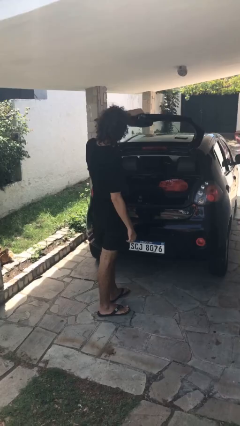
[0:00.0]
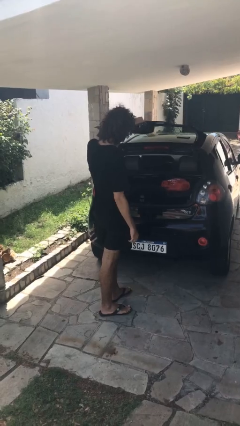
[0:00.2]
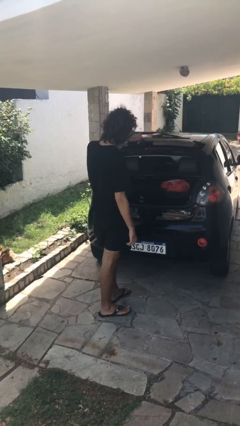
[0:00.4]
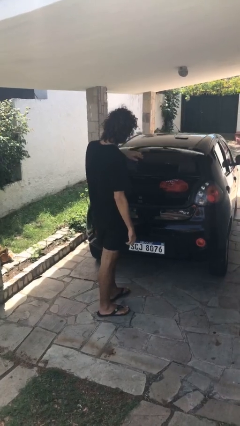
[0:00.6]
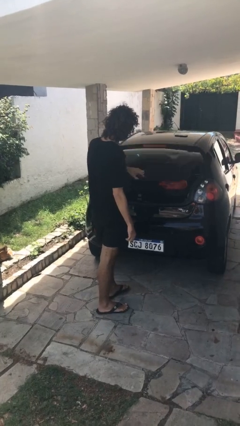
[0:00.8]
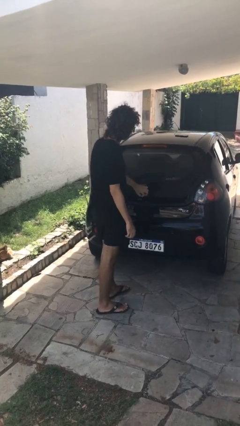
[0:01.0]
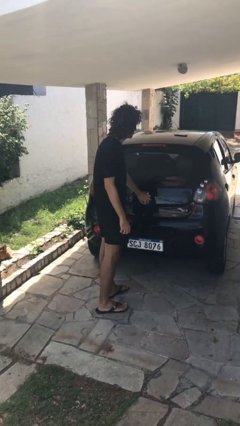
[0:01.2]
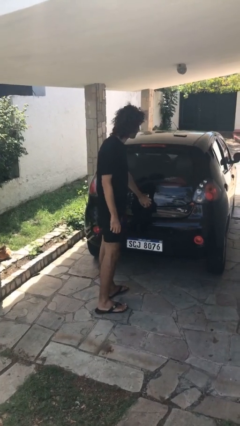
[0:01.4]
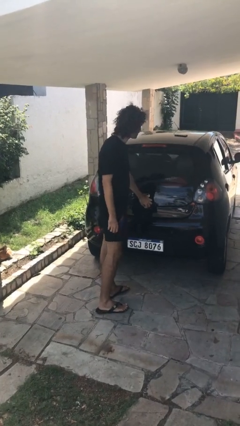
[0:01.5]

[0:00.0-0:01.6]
person closes car trunk

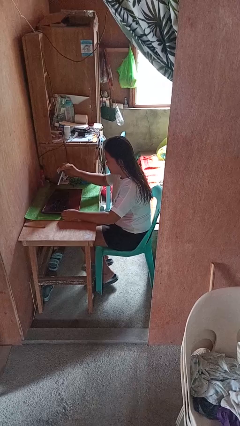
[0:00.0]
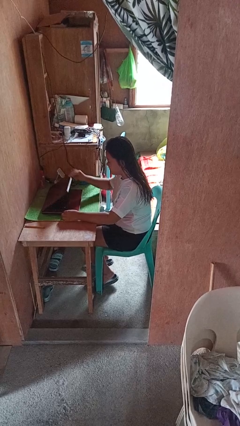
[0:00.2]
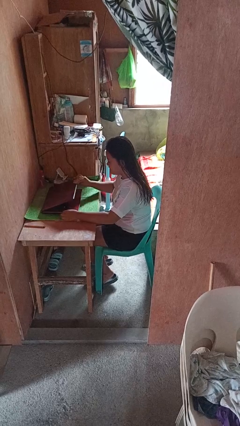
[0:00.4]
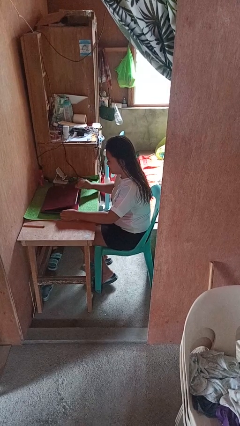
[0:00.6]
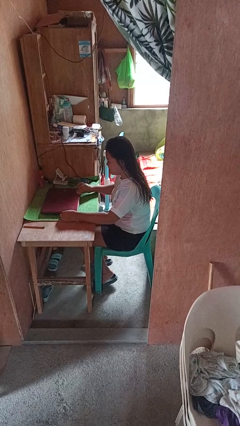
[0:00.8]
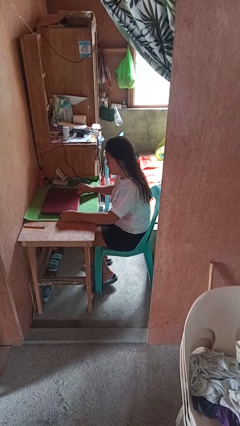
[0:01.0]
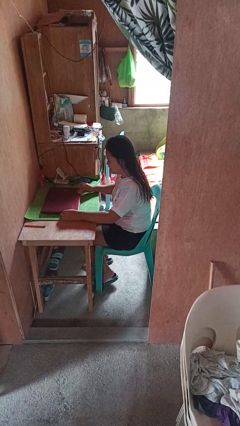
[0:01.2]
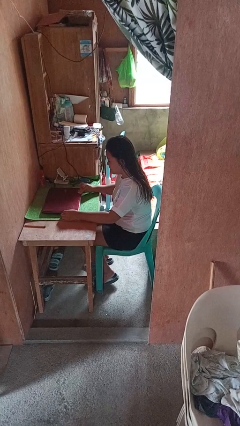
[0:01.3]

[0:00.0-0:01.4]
person closes laptop

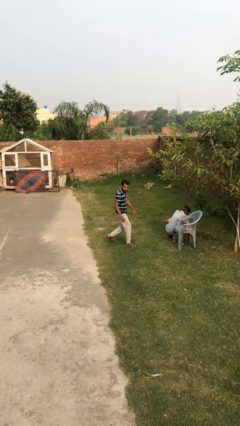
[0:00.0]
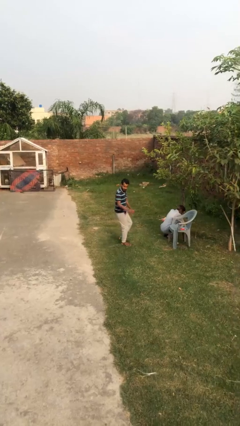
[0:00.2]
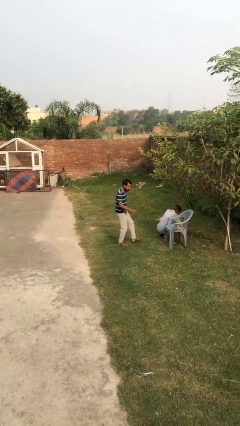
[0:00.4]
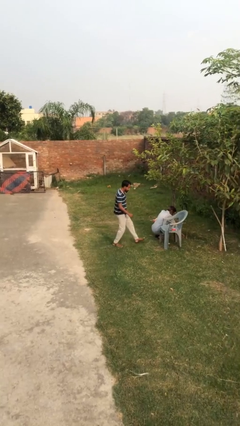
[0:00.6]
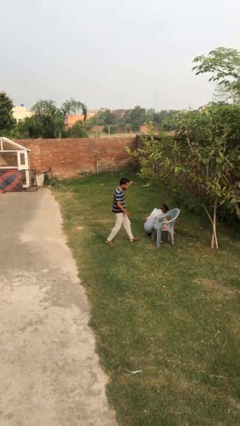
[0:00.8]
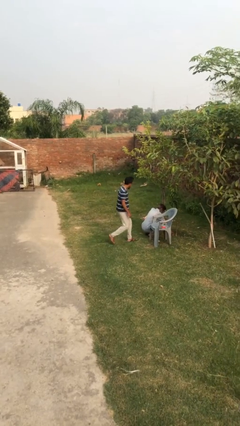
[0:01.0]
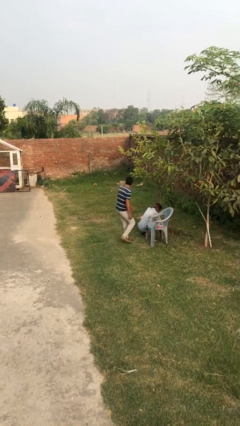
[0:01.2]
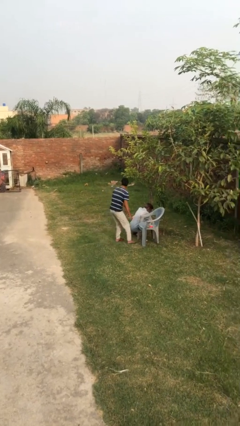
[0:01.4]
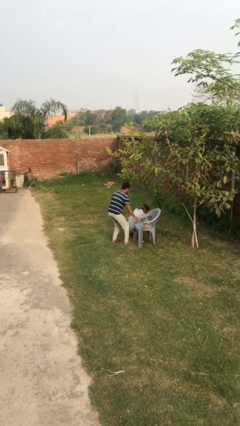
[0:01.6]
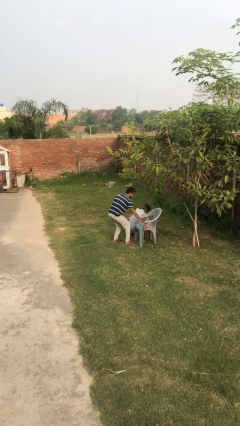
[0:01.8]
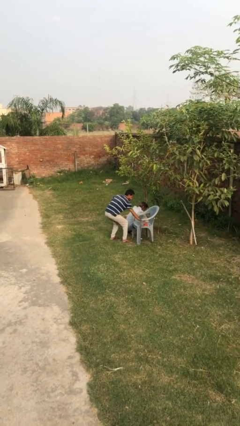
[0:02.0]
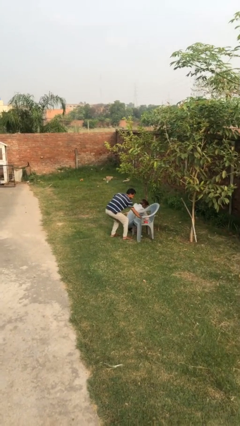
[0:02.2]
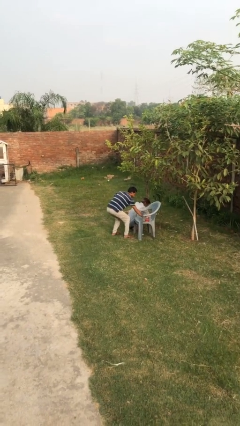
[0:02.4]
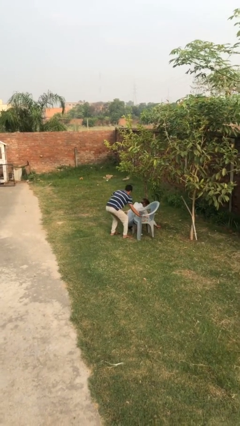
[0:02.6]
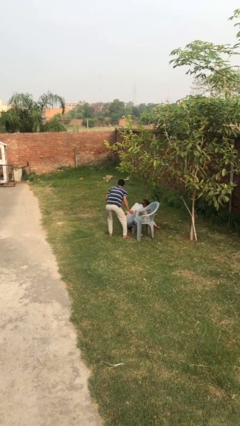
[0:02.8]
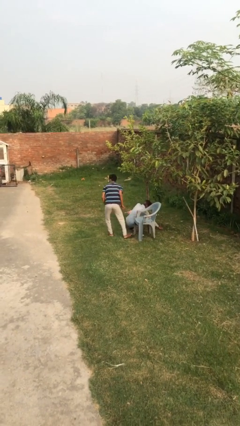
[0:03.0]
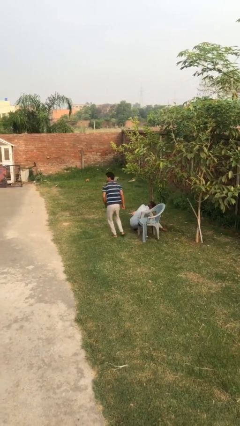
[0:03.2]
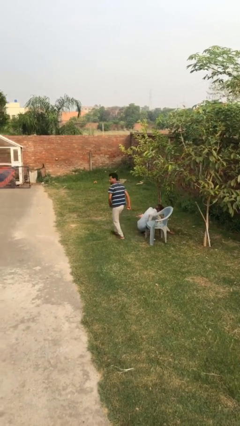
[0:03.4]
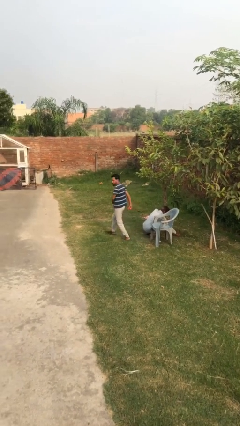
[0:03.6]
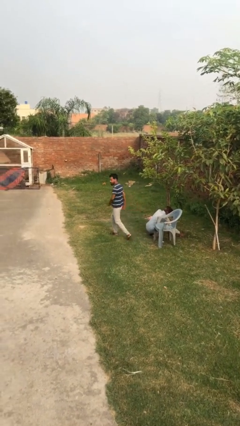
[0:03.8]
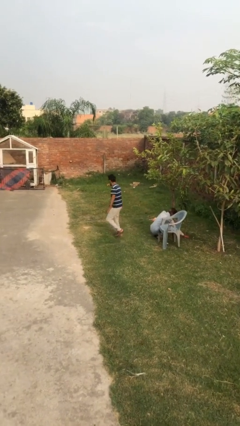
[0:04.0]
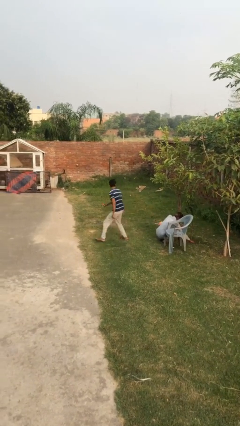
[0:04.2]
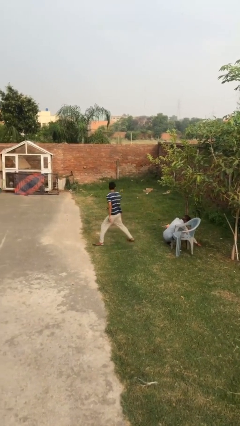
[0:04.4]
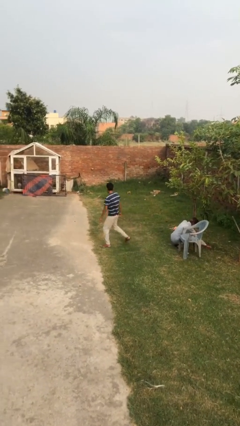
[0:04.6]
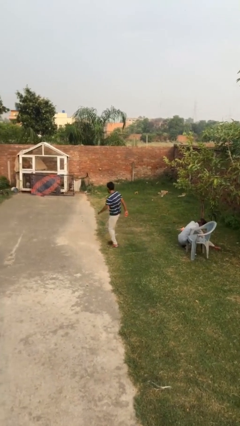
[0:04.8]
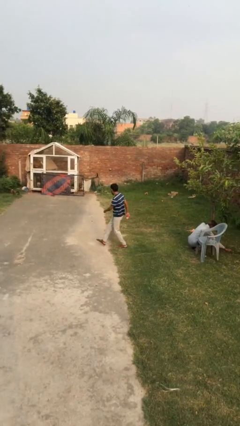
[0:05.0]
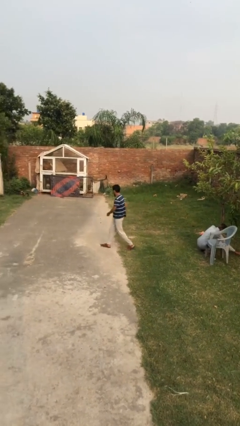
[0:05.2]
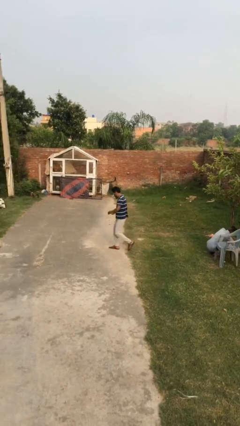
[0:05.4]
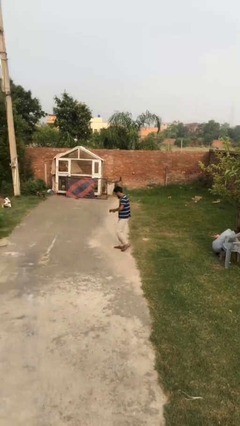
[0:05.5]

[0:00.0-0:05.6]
person steals object from person

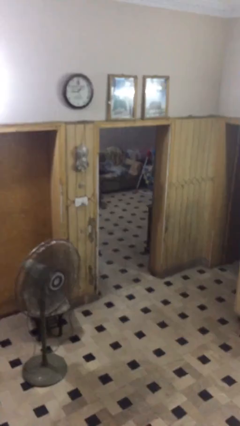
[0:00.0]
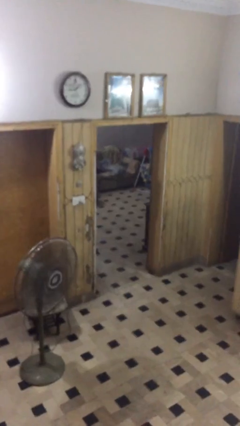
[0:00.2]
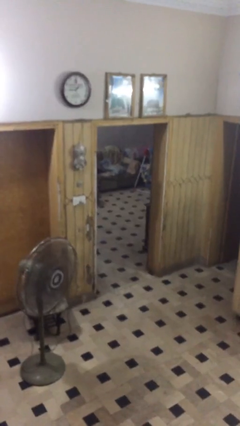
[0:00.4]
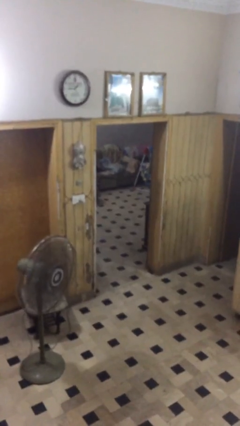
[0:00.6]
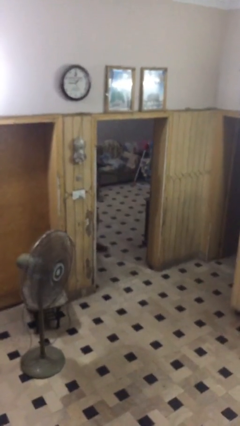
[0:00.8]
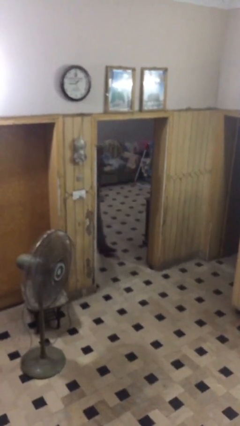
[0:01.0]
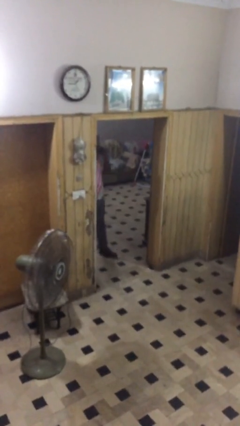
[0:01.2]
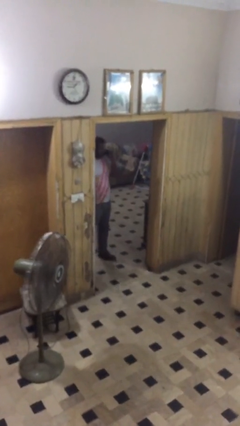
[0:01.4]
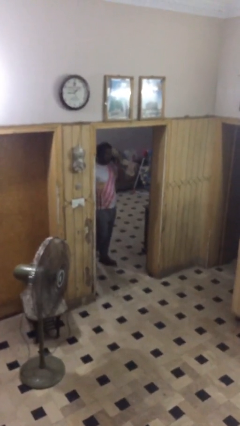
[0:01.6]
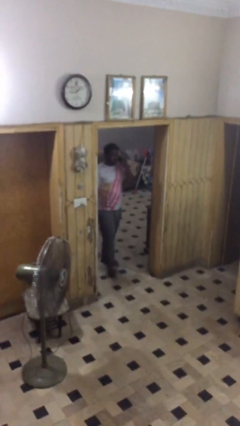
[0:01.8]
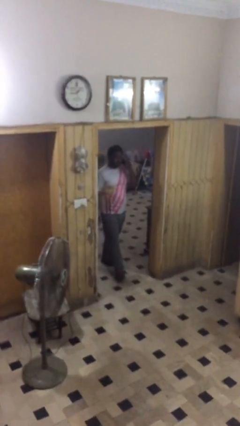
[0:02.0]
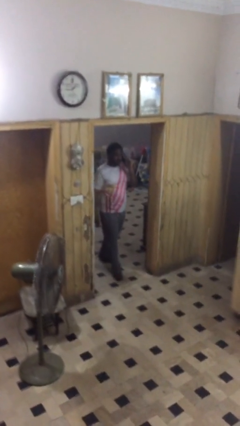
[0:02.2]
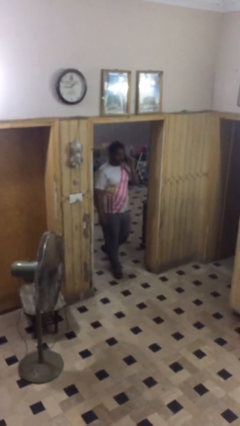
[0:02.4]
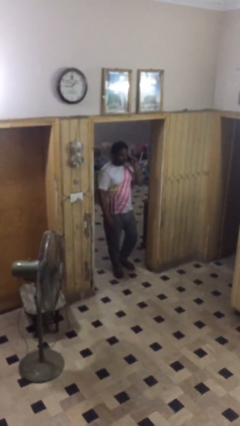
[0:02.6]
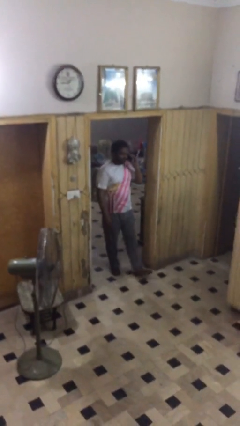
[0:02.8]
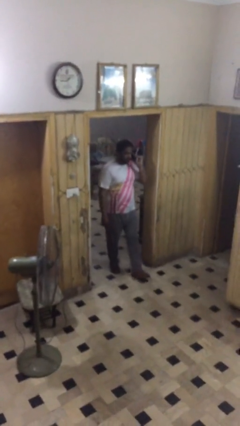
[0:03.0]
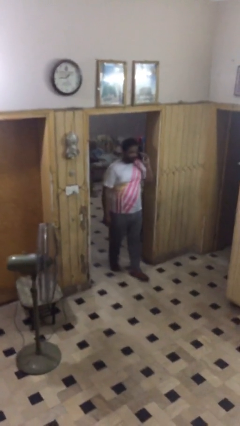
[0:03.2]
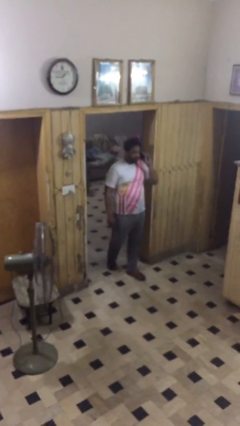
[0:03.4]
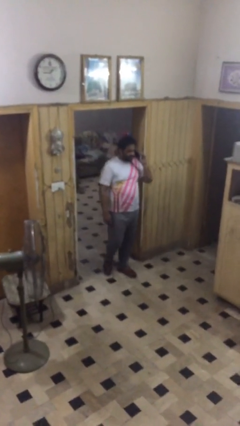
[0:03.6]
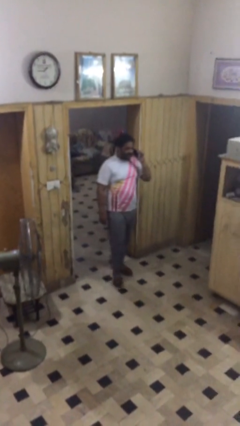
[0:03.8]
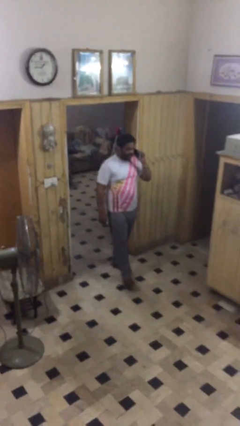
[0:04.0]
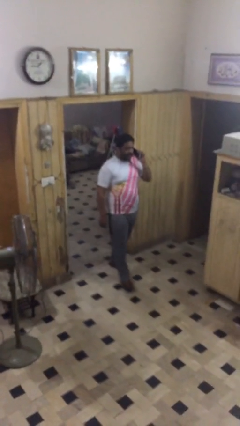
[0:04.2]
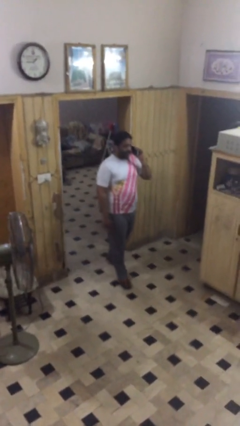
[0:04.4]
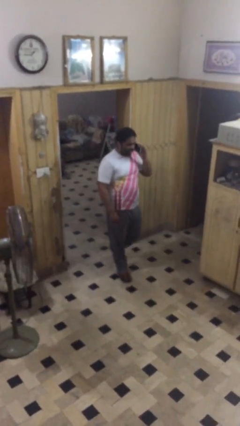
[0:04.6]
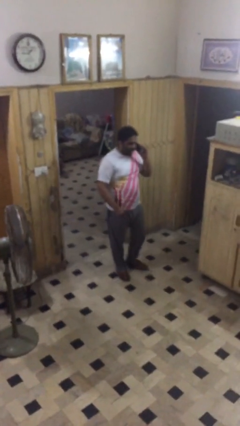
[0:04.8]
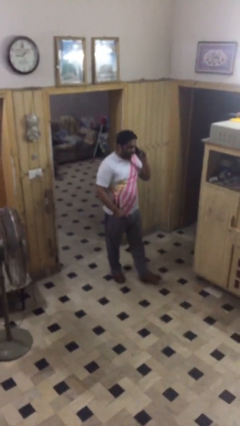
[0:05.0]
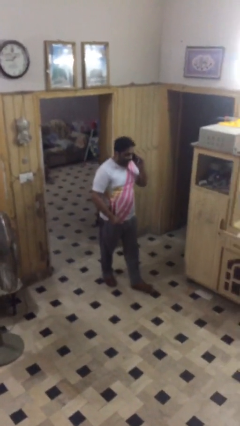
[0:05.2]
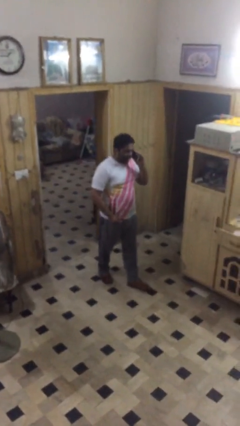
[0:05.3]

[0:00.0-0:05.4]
person enters scene through structure

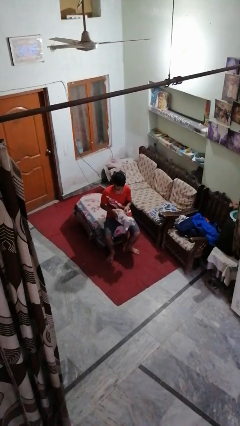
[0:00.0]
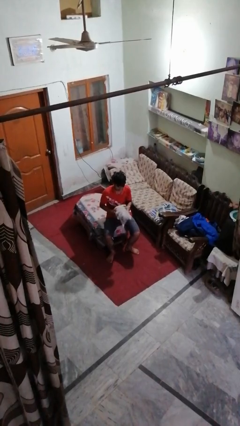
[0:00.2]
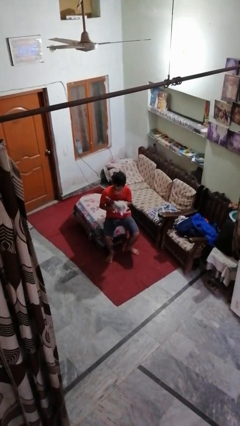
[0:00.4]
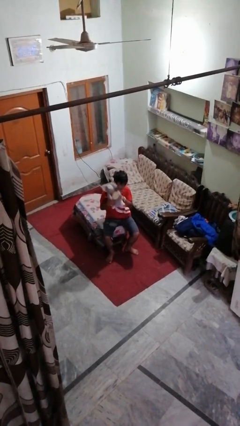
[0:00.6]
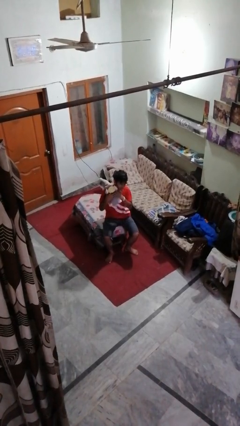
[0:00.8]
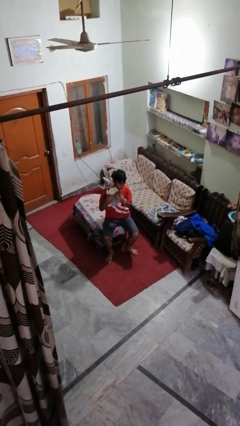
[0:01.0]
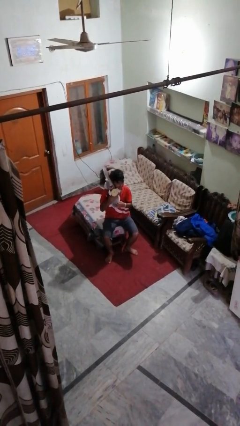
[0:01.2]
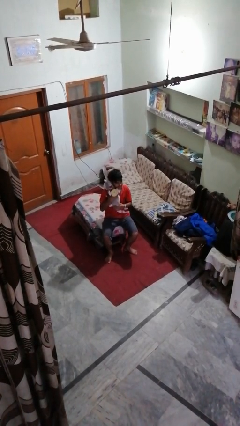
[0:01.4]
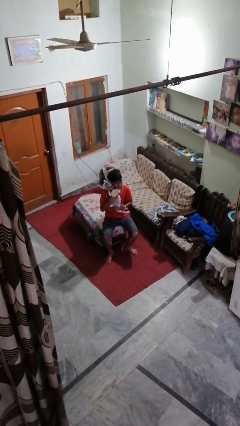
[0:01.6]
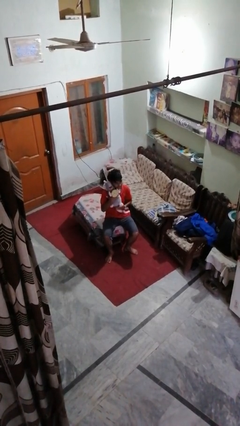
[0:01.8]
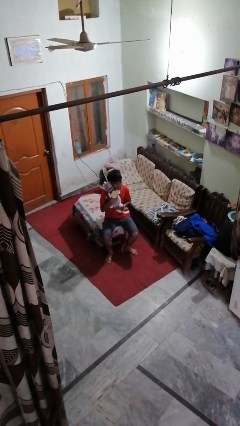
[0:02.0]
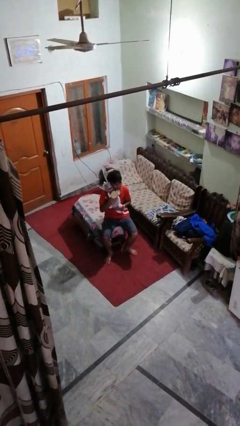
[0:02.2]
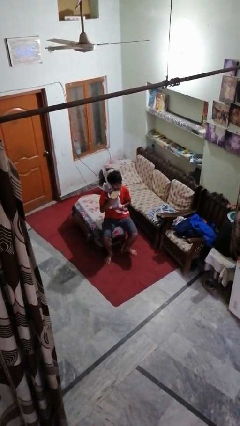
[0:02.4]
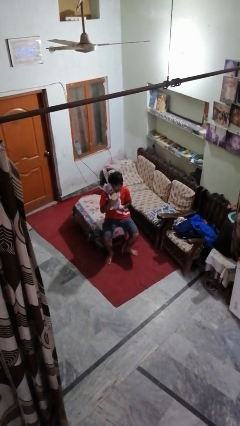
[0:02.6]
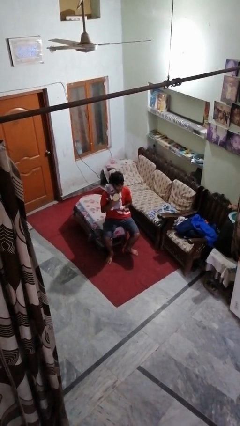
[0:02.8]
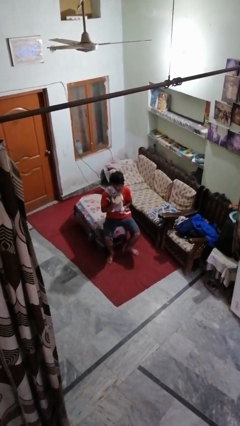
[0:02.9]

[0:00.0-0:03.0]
person hugs stuffed animal

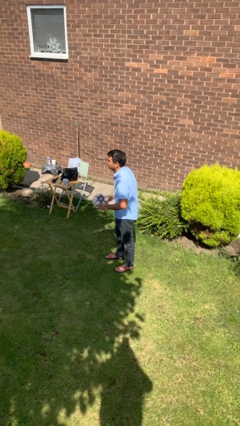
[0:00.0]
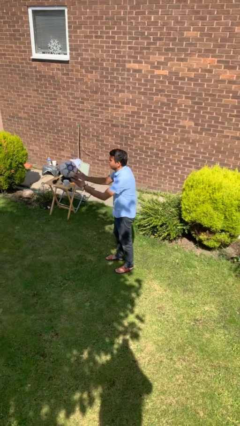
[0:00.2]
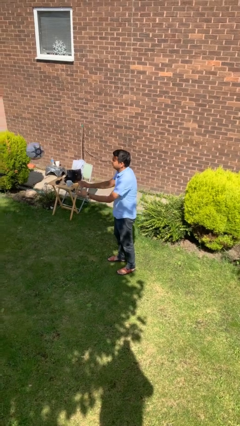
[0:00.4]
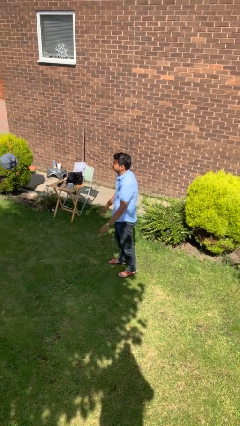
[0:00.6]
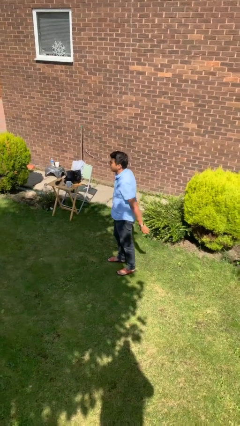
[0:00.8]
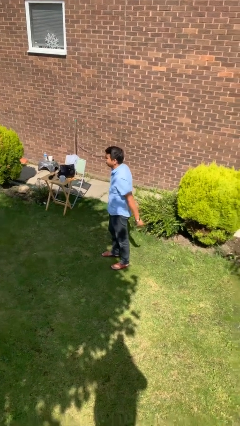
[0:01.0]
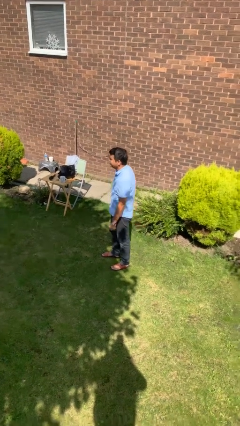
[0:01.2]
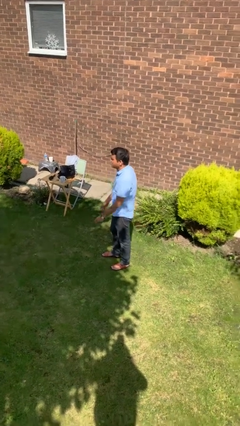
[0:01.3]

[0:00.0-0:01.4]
person throws object to person
